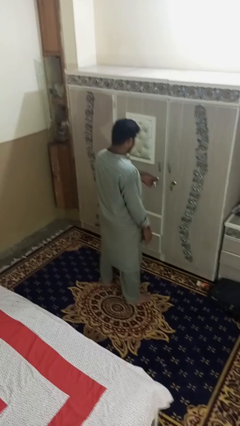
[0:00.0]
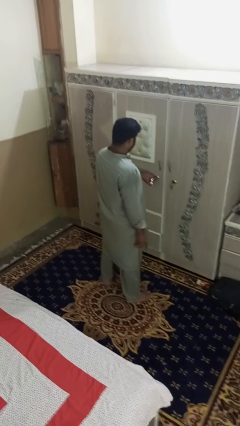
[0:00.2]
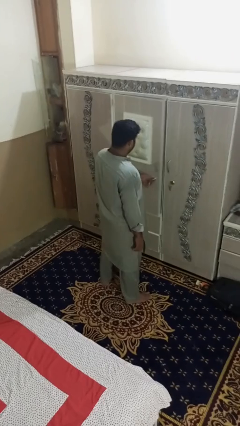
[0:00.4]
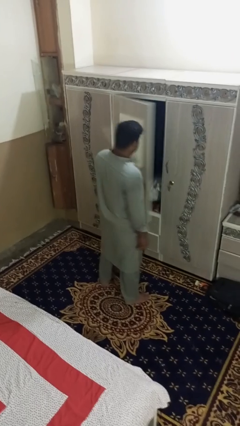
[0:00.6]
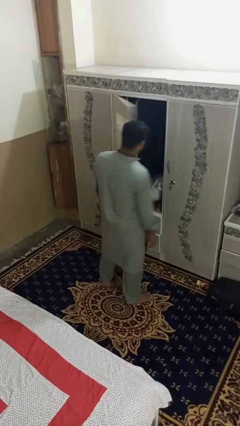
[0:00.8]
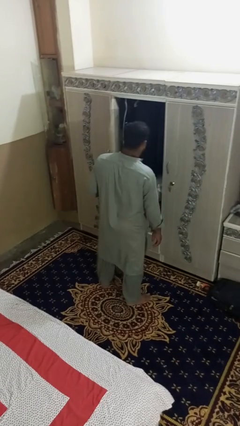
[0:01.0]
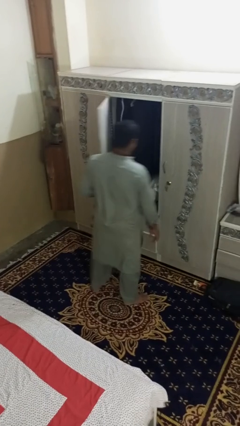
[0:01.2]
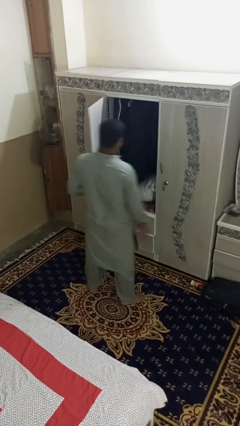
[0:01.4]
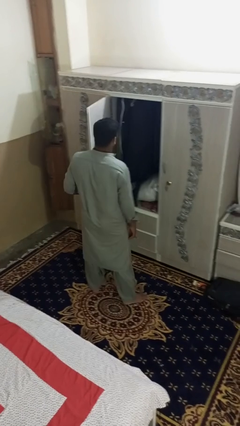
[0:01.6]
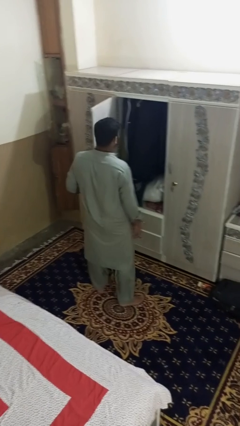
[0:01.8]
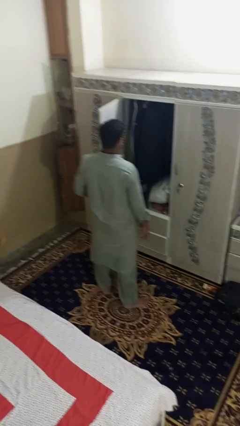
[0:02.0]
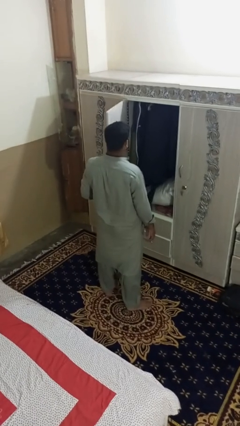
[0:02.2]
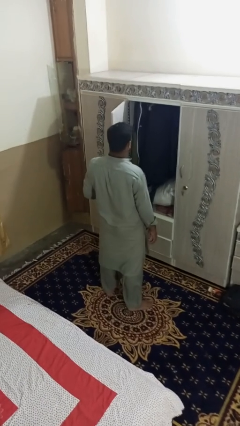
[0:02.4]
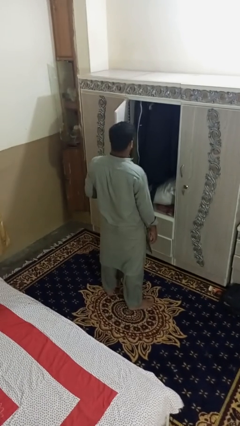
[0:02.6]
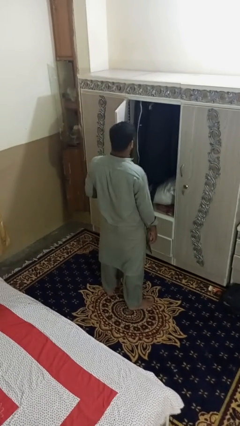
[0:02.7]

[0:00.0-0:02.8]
person opens dresser drawer

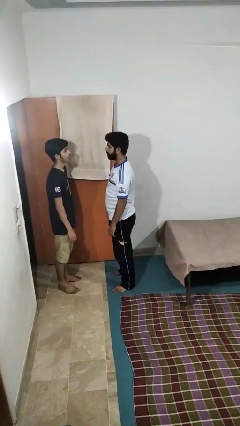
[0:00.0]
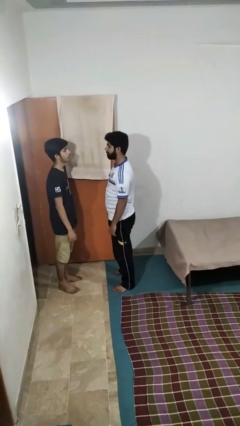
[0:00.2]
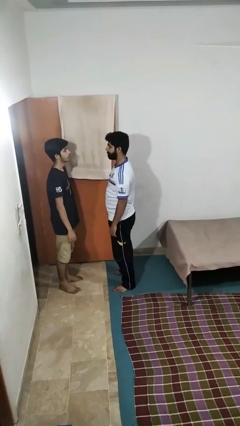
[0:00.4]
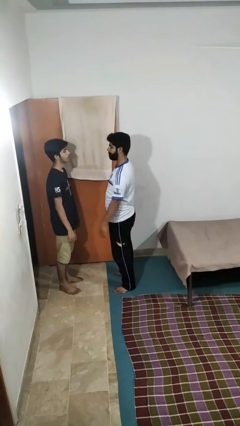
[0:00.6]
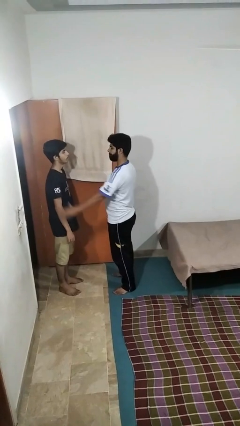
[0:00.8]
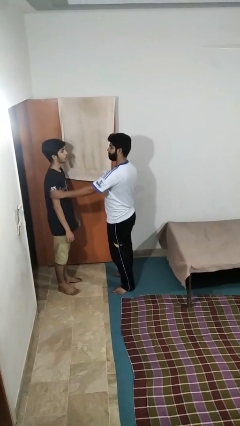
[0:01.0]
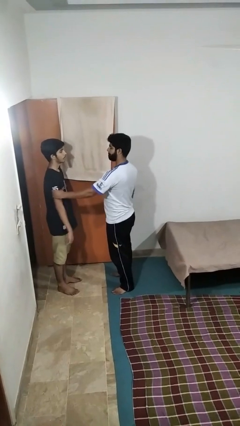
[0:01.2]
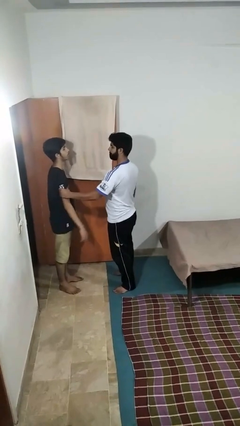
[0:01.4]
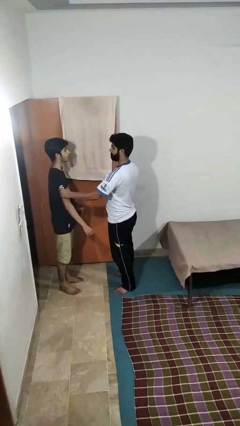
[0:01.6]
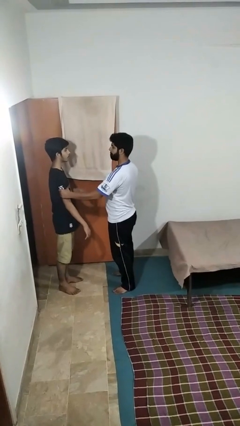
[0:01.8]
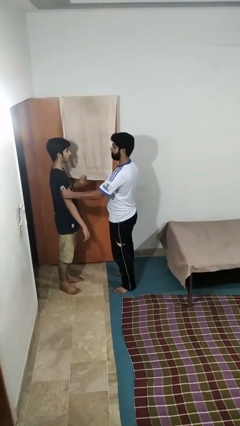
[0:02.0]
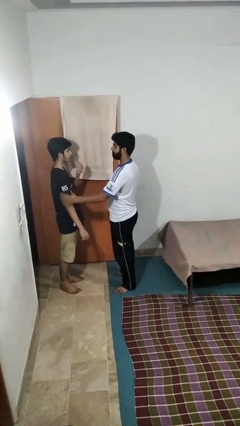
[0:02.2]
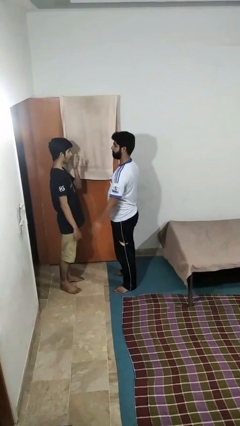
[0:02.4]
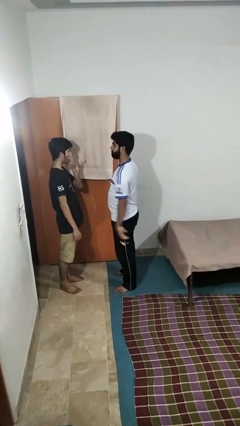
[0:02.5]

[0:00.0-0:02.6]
person grabs person by bicep

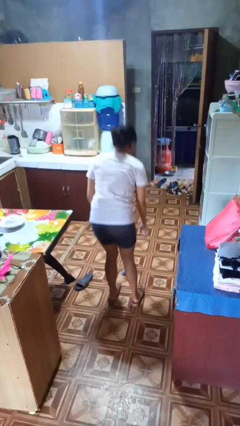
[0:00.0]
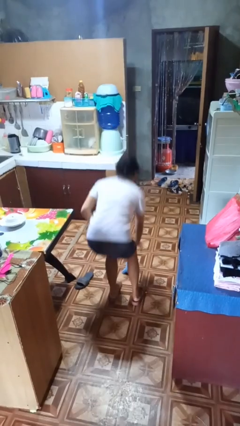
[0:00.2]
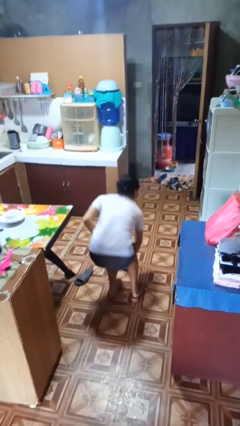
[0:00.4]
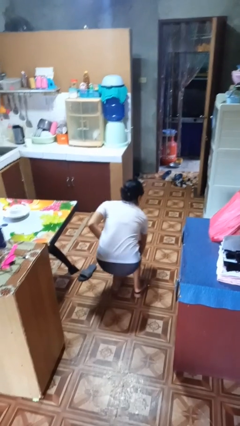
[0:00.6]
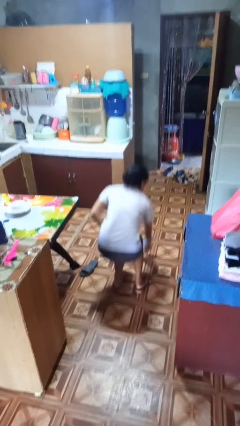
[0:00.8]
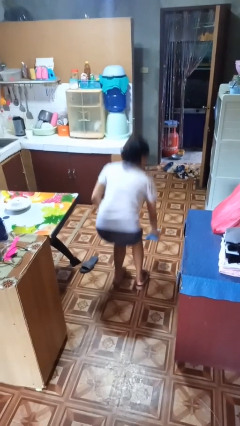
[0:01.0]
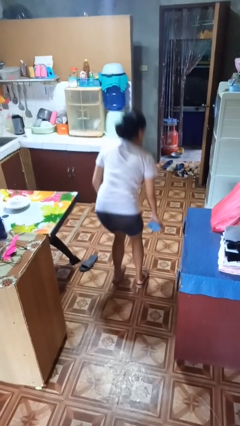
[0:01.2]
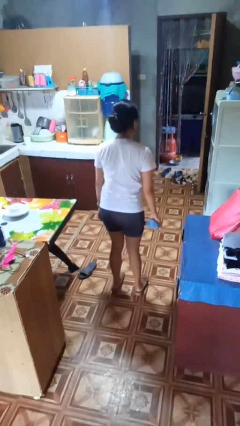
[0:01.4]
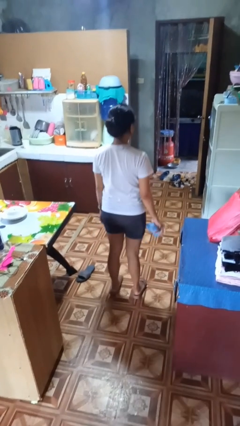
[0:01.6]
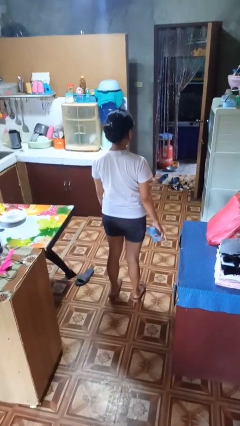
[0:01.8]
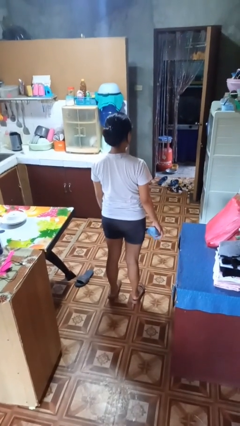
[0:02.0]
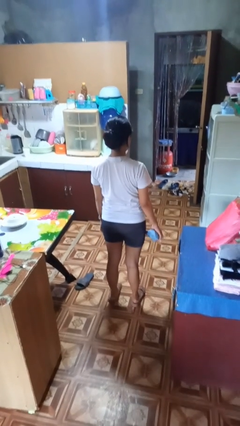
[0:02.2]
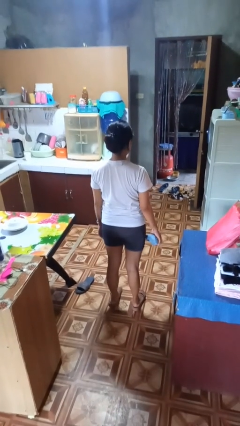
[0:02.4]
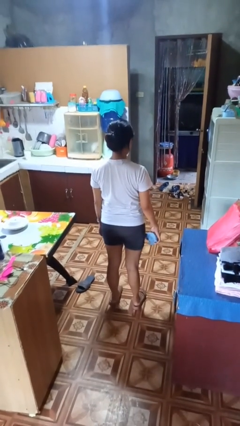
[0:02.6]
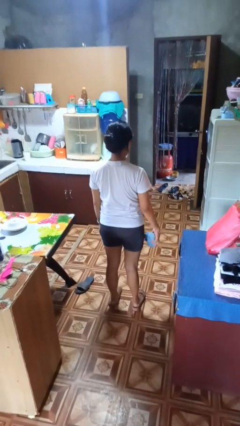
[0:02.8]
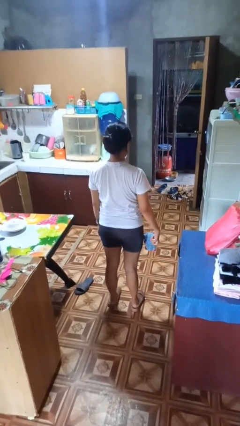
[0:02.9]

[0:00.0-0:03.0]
person picks up object from floor

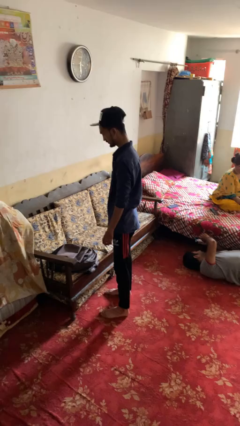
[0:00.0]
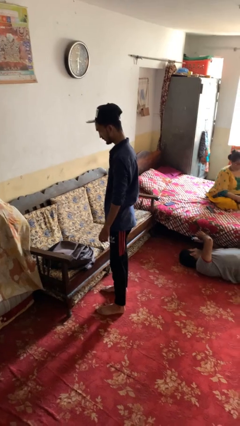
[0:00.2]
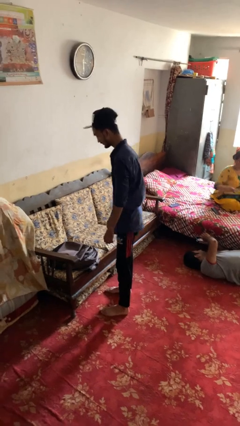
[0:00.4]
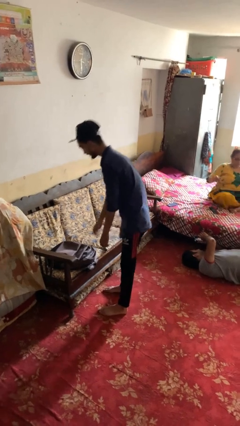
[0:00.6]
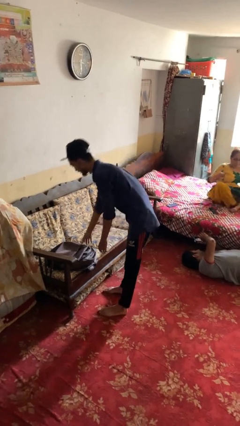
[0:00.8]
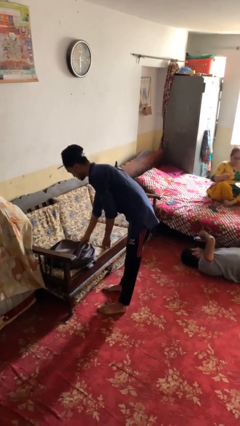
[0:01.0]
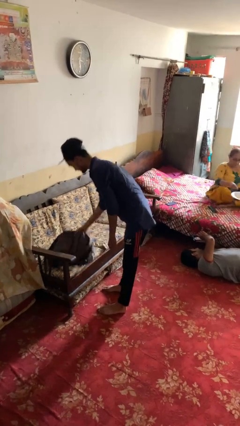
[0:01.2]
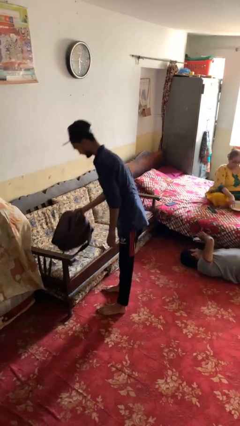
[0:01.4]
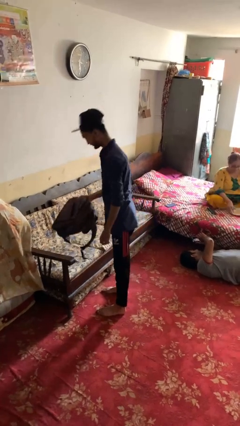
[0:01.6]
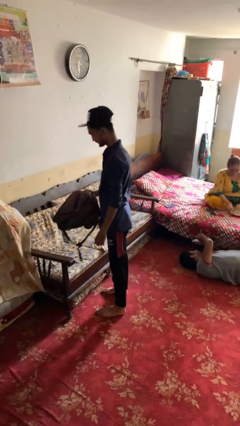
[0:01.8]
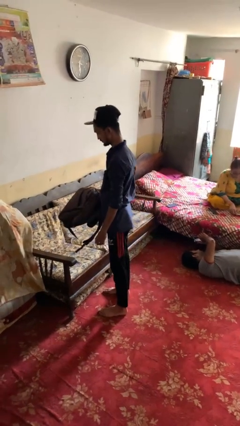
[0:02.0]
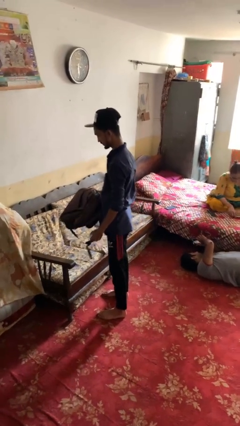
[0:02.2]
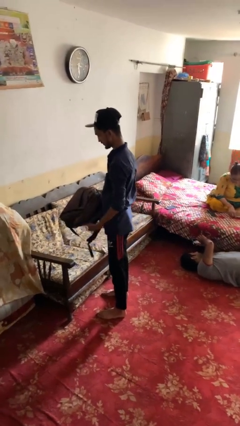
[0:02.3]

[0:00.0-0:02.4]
person picks up object from couch

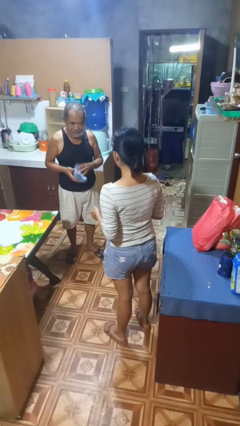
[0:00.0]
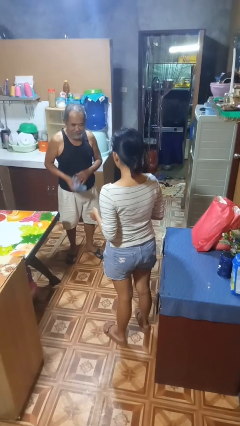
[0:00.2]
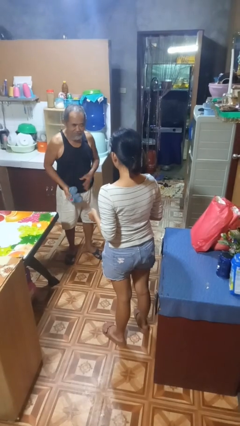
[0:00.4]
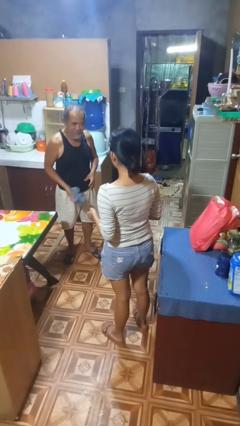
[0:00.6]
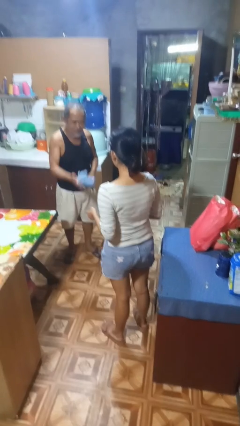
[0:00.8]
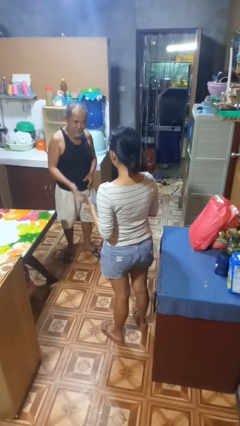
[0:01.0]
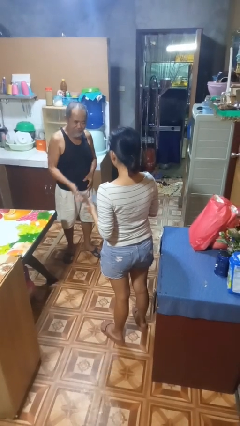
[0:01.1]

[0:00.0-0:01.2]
person throws object to person

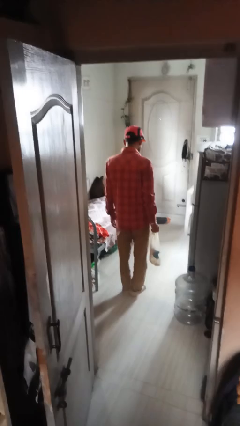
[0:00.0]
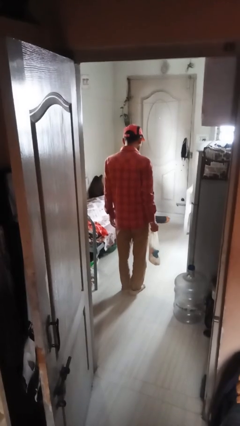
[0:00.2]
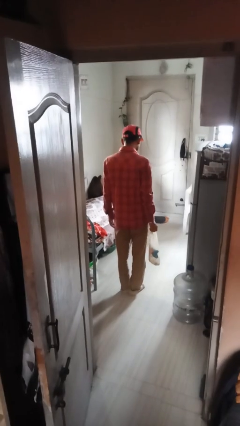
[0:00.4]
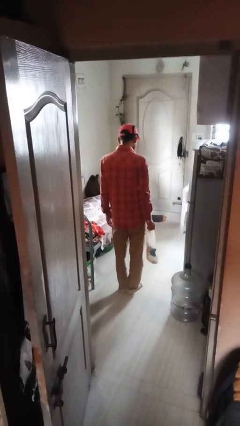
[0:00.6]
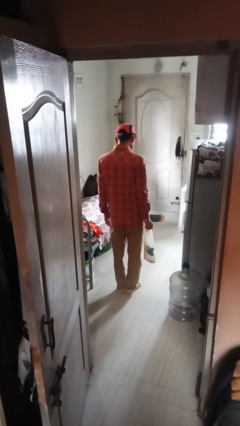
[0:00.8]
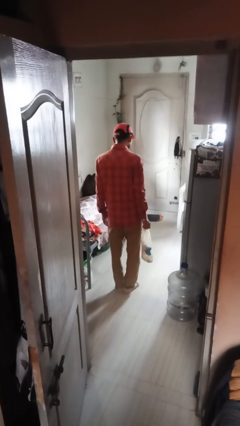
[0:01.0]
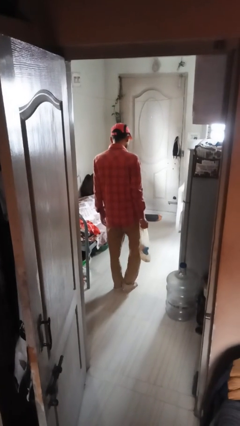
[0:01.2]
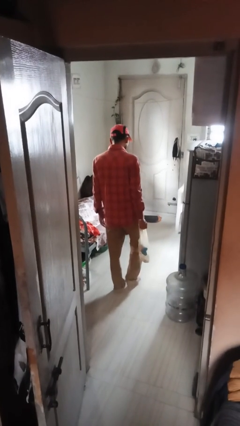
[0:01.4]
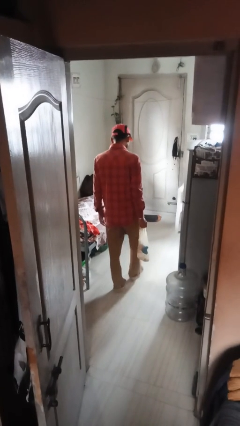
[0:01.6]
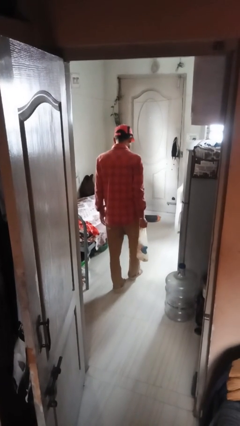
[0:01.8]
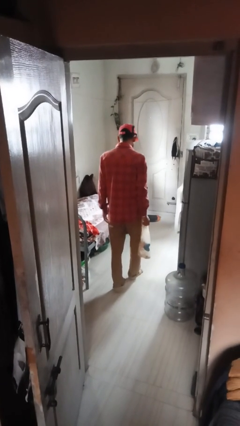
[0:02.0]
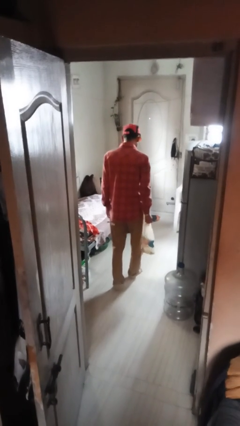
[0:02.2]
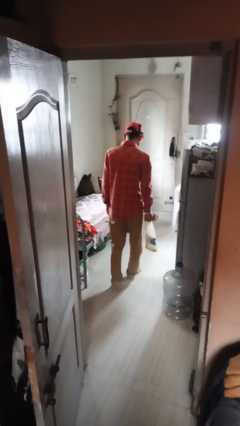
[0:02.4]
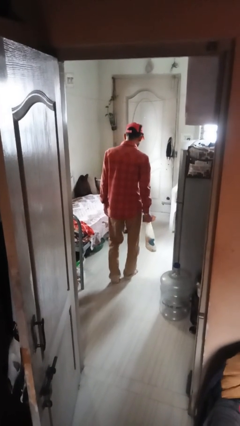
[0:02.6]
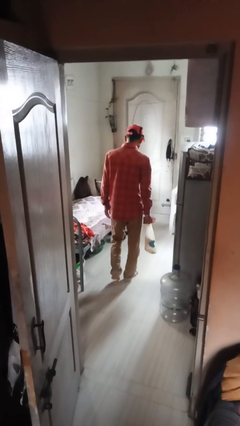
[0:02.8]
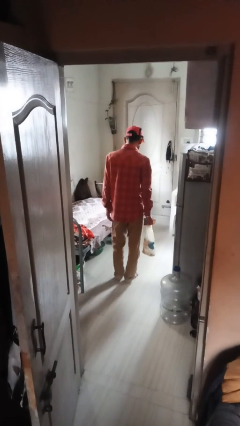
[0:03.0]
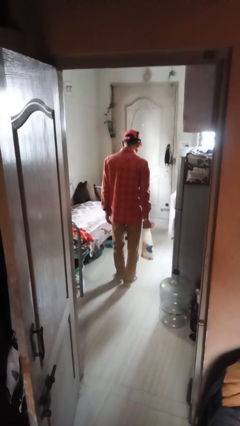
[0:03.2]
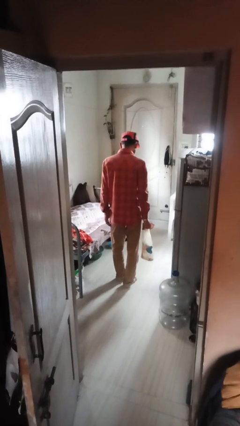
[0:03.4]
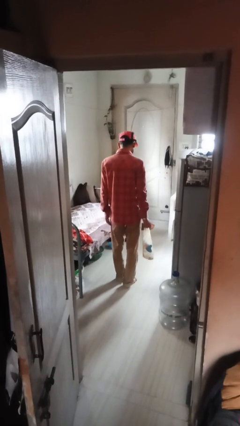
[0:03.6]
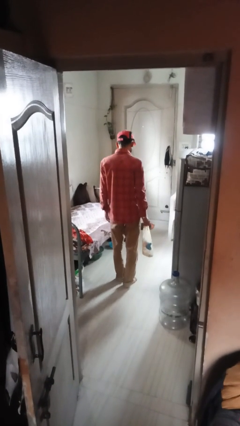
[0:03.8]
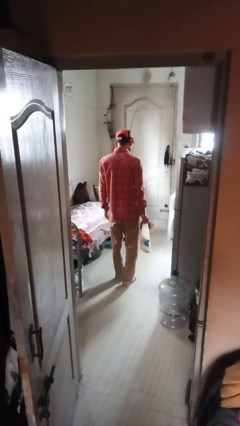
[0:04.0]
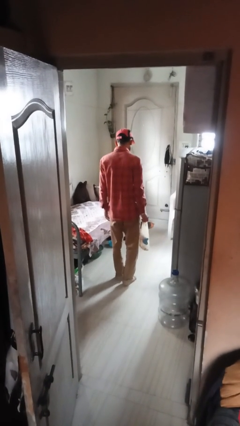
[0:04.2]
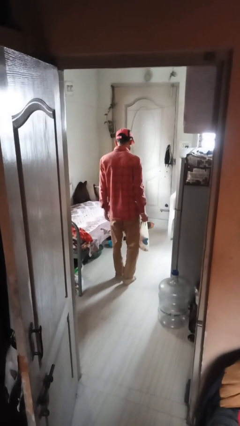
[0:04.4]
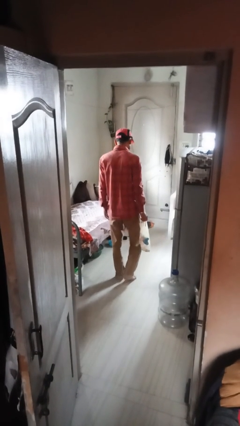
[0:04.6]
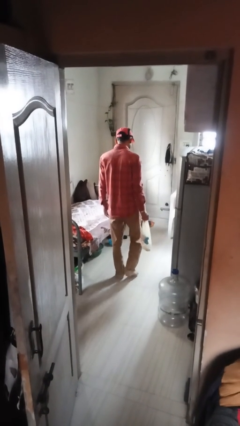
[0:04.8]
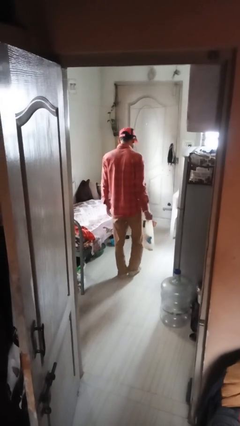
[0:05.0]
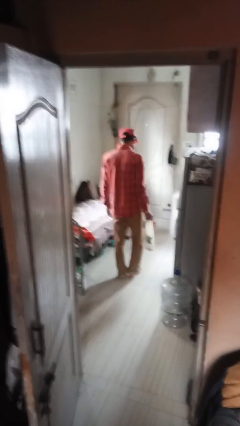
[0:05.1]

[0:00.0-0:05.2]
person carries groceries
